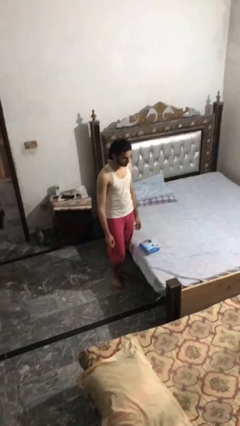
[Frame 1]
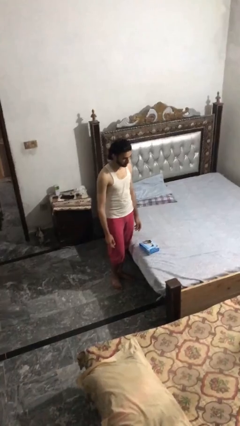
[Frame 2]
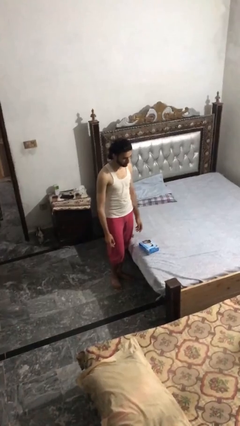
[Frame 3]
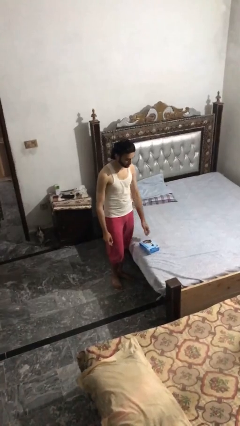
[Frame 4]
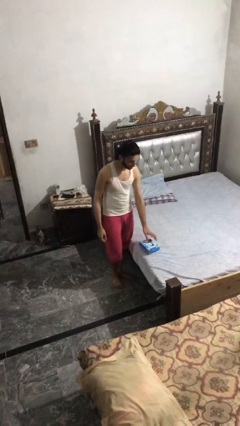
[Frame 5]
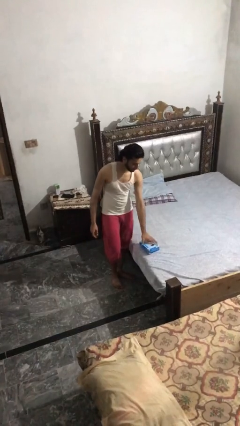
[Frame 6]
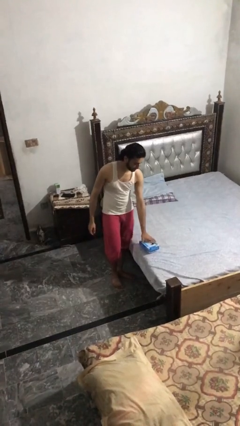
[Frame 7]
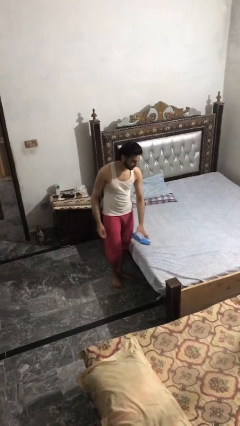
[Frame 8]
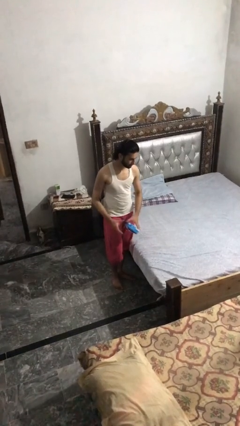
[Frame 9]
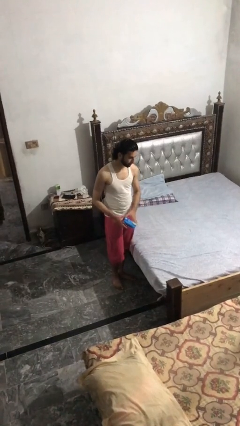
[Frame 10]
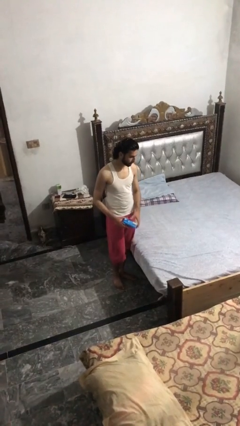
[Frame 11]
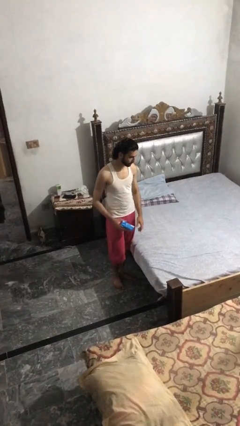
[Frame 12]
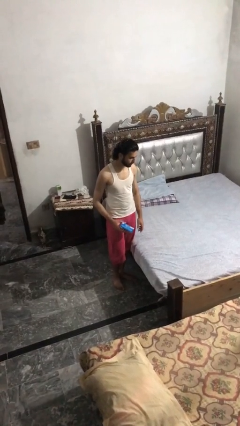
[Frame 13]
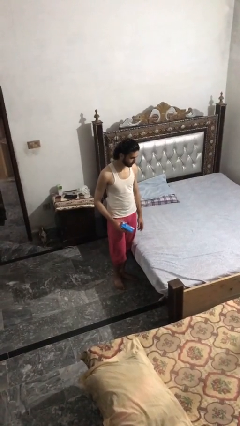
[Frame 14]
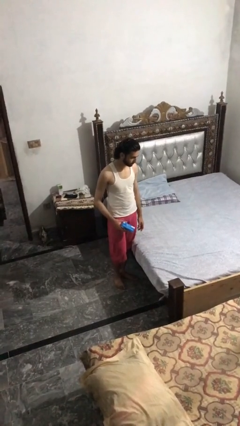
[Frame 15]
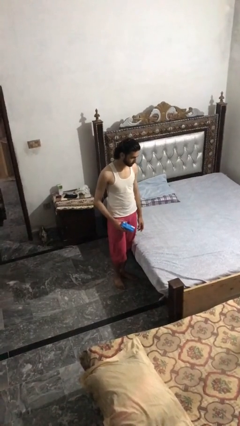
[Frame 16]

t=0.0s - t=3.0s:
person picks up object from bed

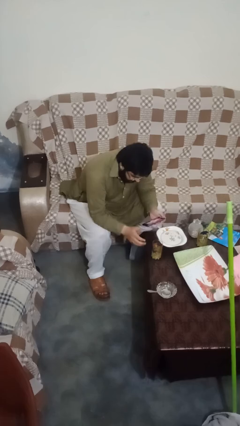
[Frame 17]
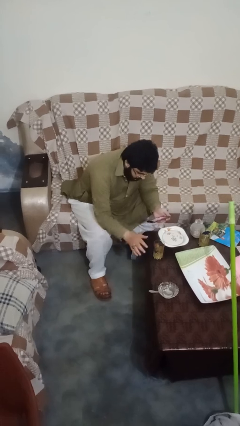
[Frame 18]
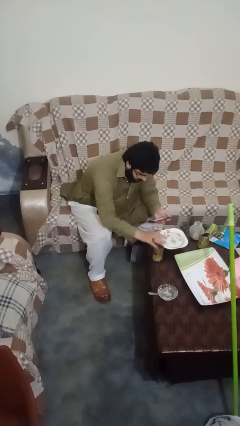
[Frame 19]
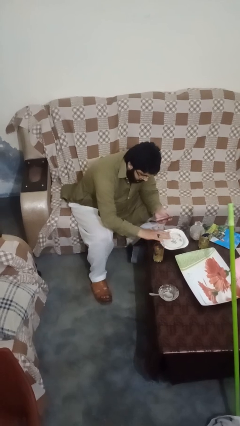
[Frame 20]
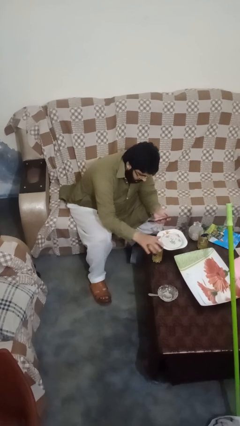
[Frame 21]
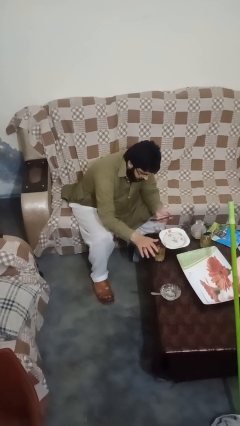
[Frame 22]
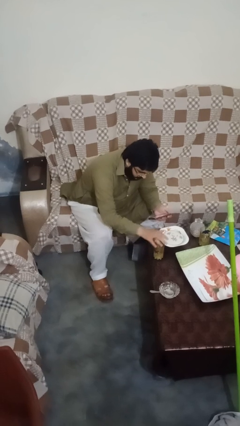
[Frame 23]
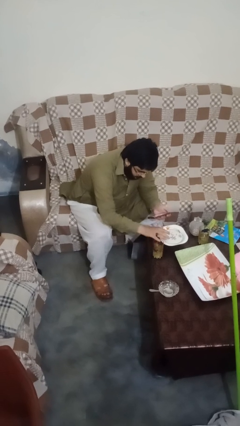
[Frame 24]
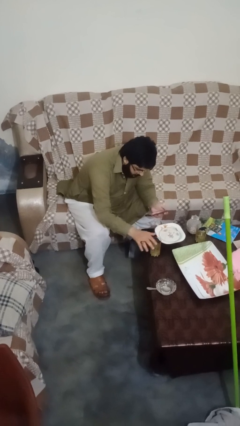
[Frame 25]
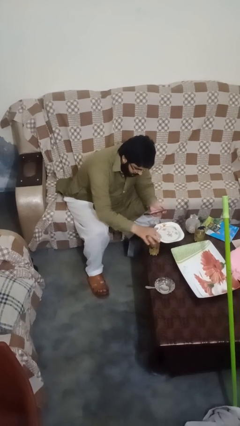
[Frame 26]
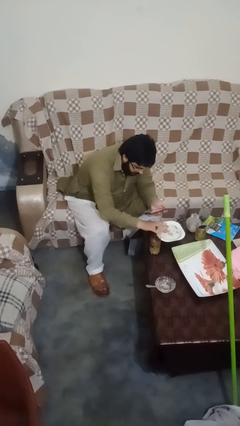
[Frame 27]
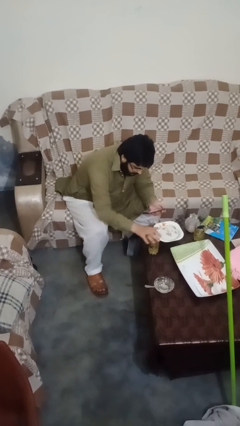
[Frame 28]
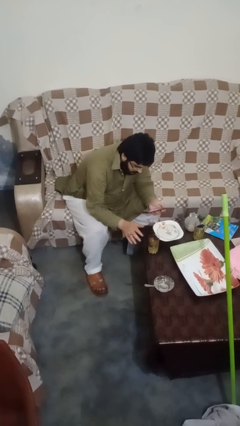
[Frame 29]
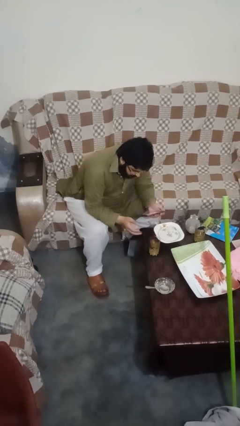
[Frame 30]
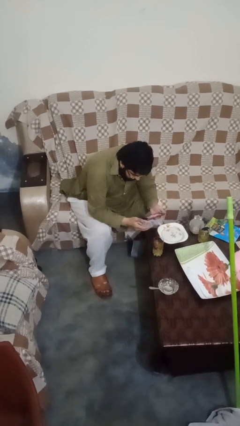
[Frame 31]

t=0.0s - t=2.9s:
person waves hand over object

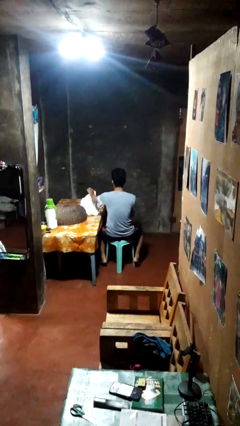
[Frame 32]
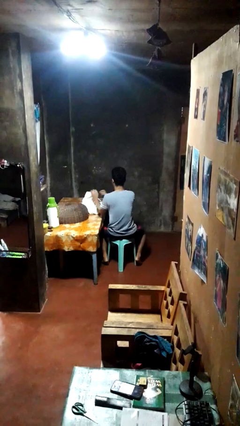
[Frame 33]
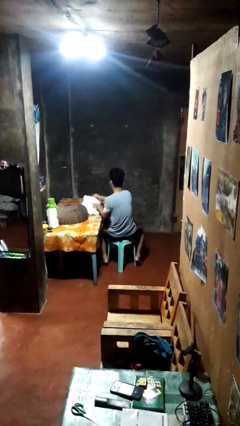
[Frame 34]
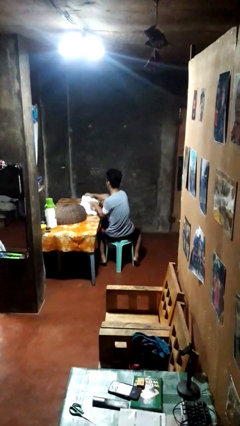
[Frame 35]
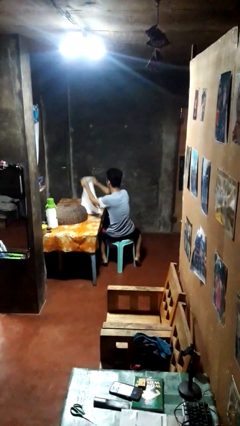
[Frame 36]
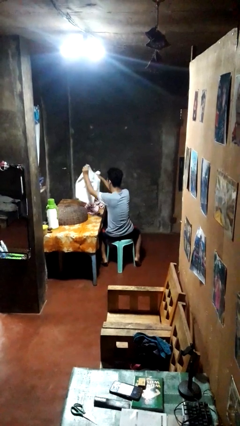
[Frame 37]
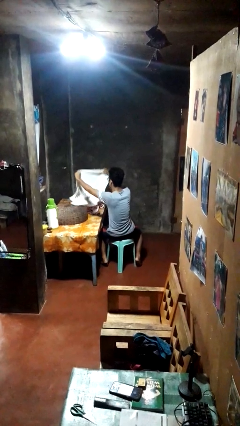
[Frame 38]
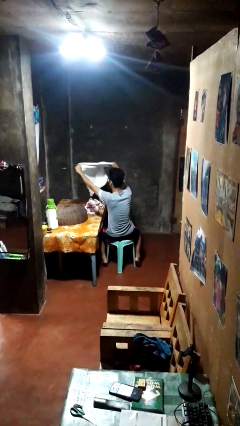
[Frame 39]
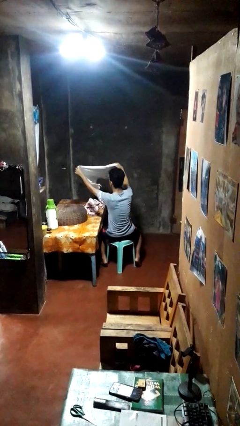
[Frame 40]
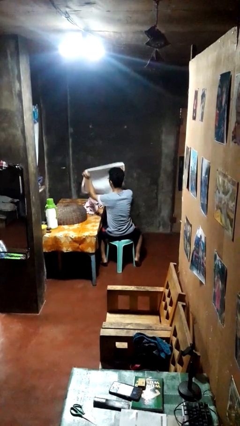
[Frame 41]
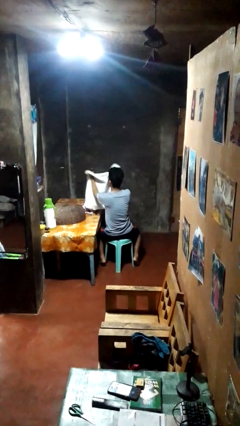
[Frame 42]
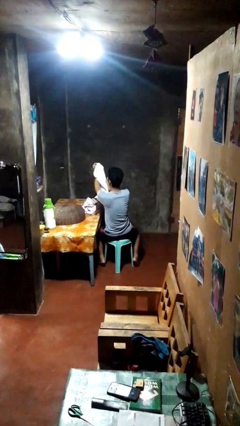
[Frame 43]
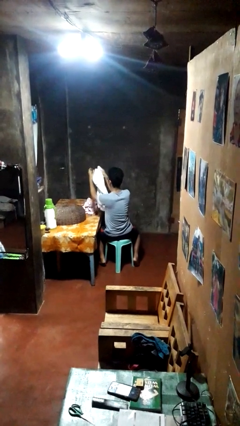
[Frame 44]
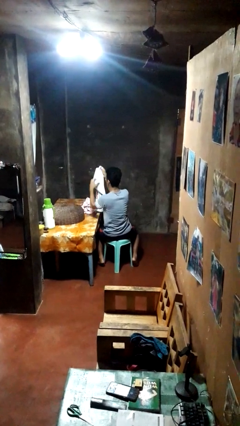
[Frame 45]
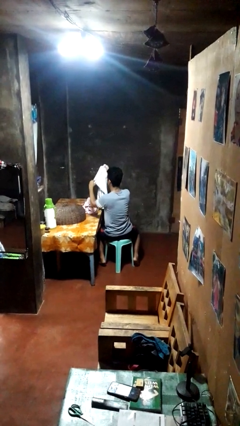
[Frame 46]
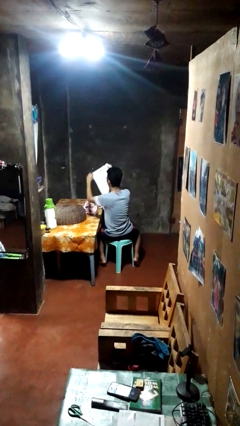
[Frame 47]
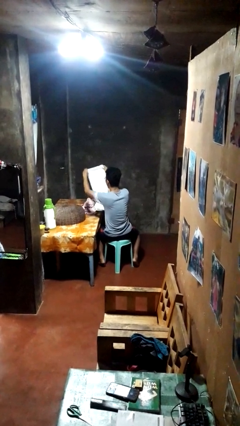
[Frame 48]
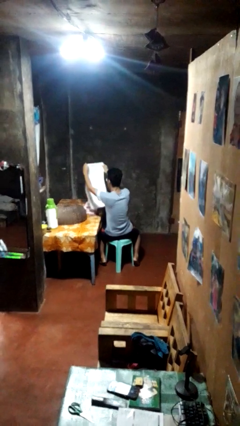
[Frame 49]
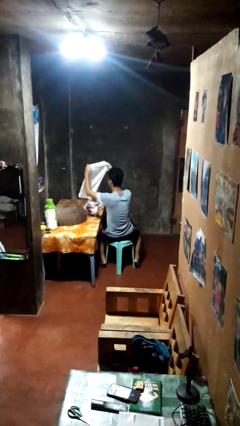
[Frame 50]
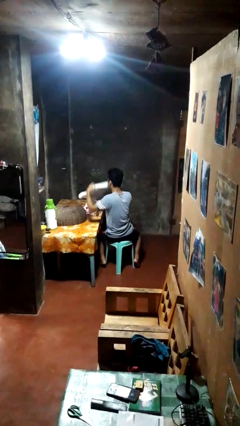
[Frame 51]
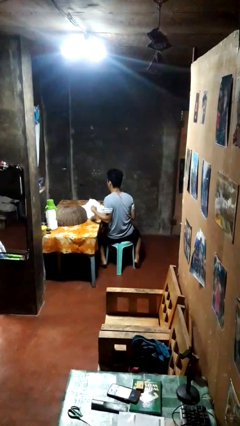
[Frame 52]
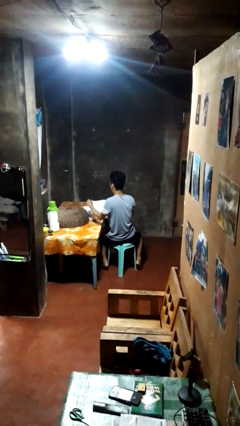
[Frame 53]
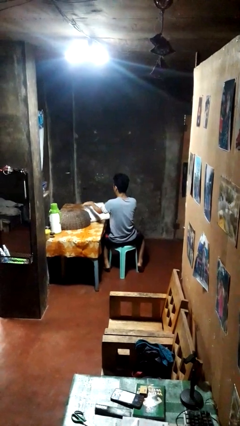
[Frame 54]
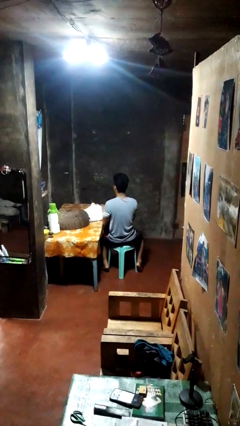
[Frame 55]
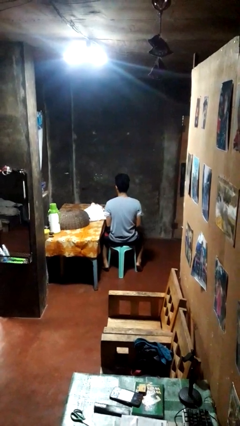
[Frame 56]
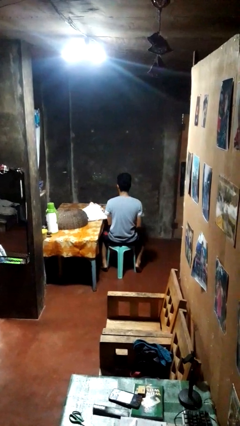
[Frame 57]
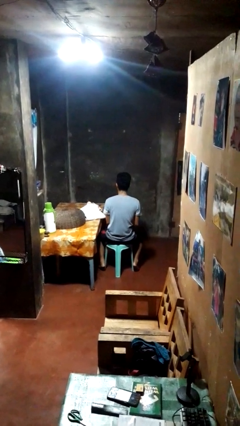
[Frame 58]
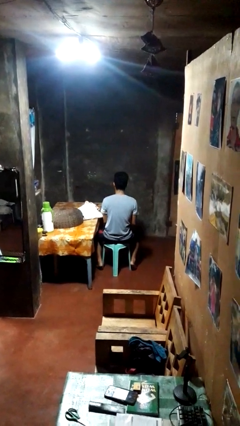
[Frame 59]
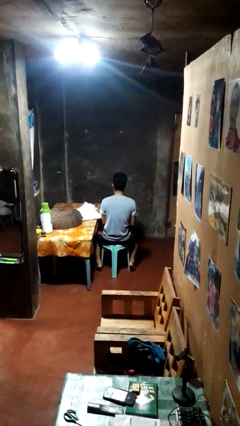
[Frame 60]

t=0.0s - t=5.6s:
person folds towel

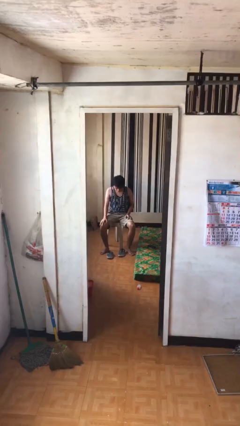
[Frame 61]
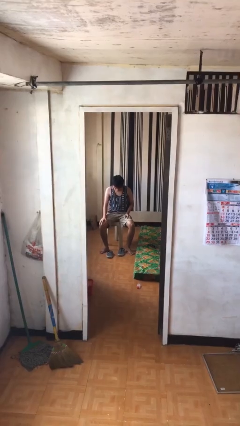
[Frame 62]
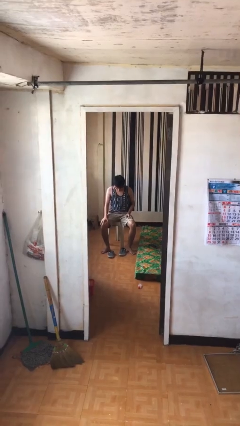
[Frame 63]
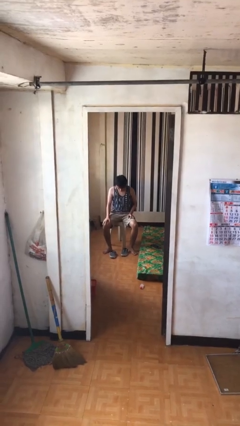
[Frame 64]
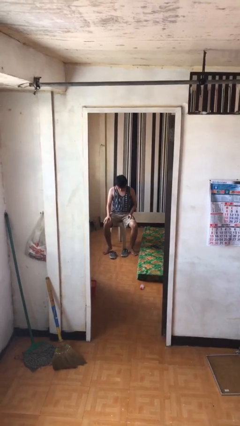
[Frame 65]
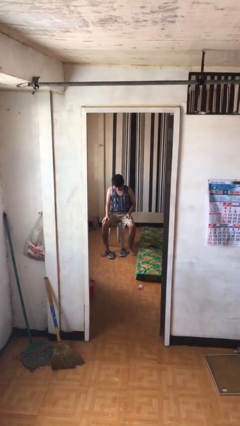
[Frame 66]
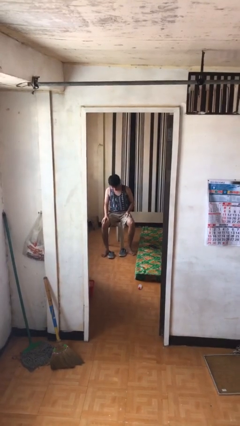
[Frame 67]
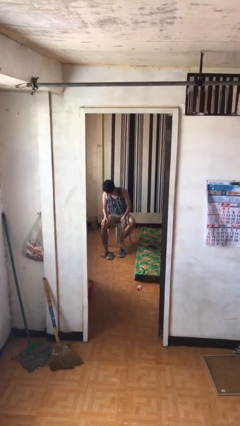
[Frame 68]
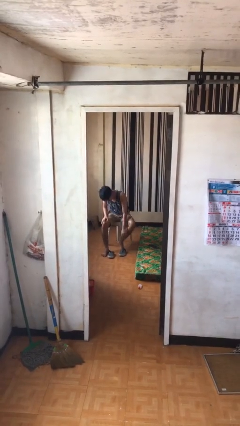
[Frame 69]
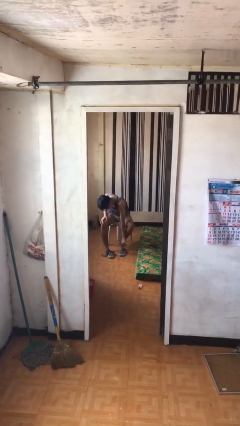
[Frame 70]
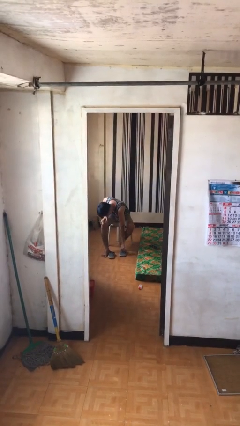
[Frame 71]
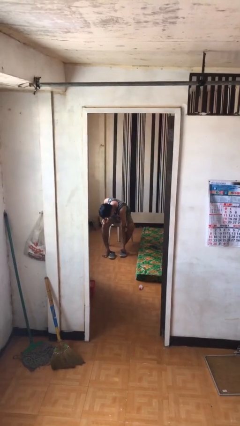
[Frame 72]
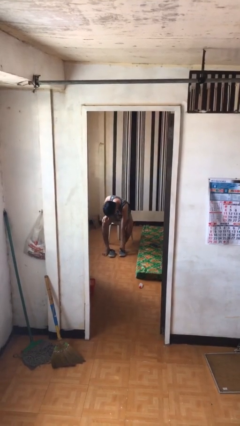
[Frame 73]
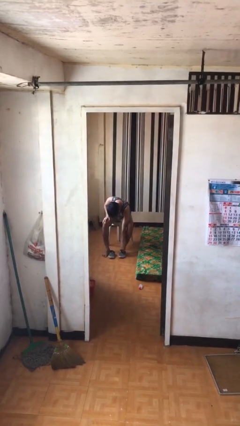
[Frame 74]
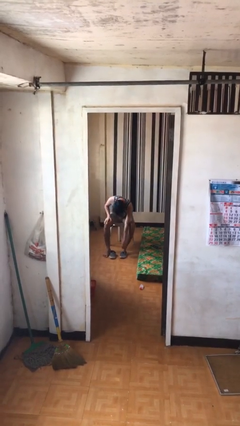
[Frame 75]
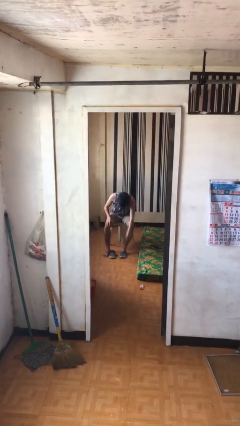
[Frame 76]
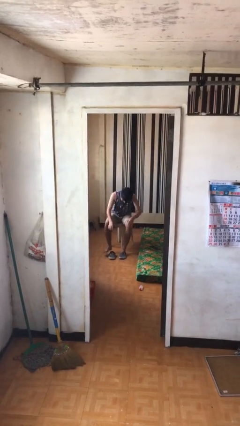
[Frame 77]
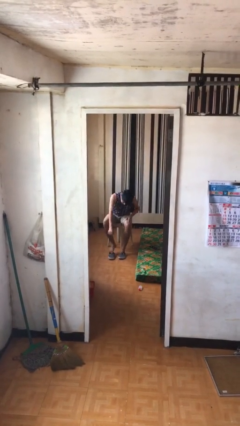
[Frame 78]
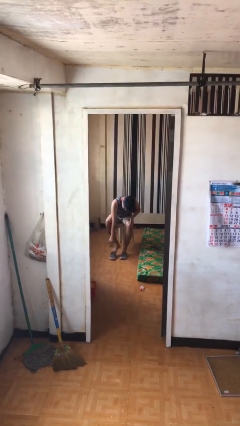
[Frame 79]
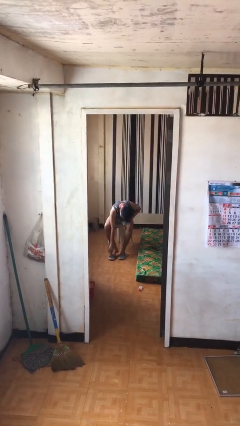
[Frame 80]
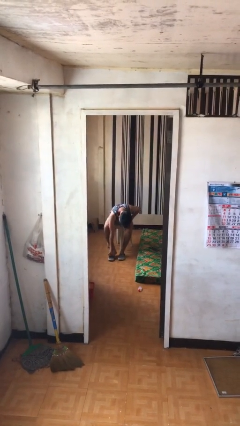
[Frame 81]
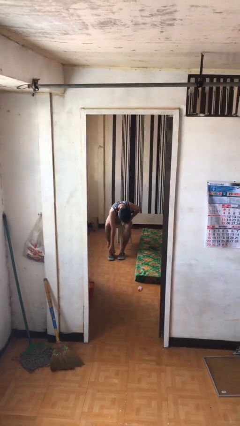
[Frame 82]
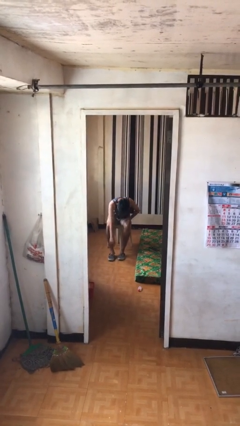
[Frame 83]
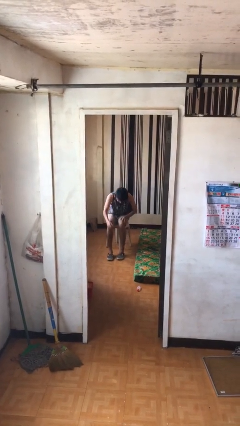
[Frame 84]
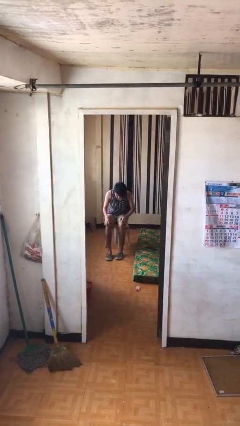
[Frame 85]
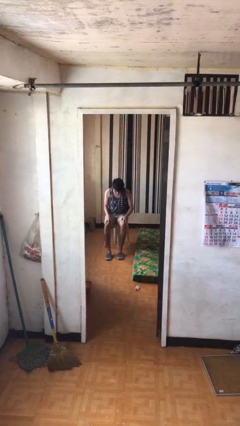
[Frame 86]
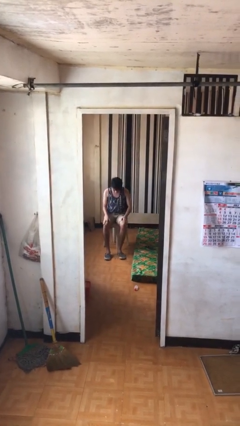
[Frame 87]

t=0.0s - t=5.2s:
person puts on shoes

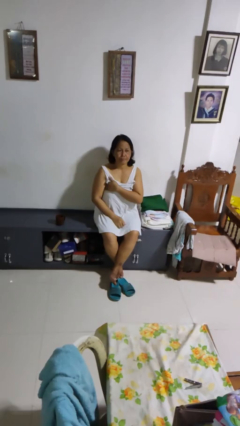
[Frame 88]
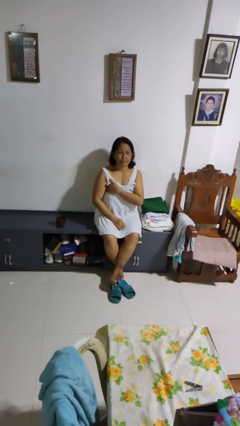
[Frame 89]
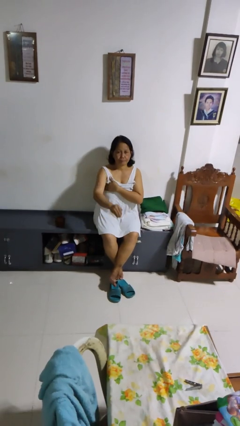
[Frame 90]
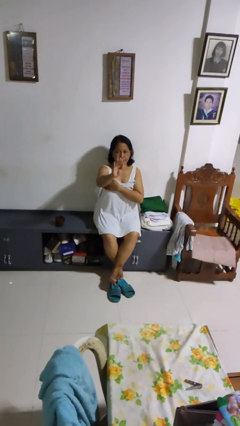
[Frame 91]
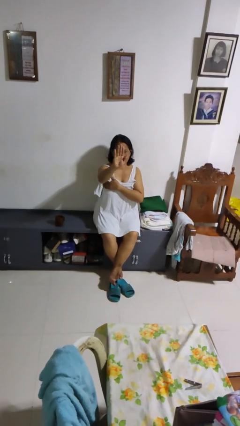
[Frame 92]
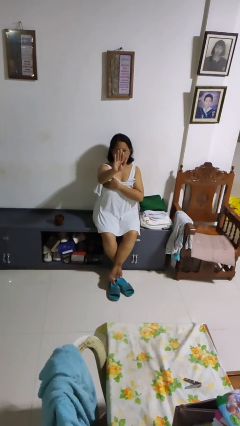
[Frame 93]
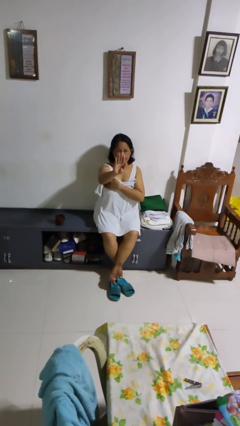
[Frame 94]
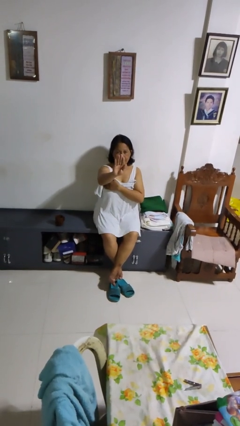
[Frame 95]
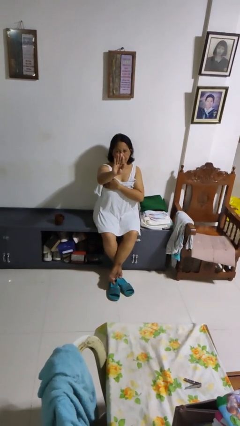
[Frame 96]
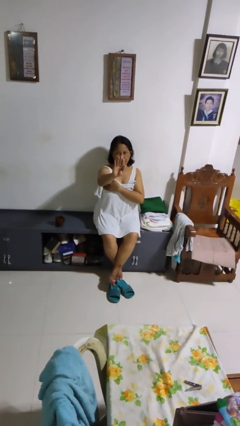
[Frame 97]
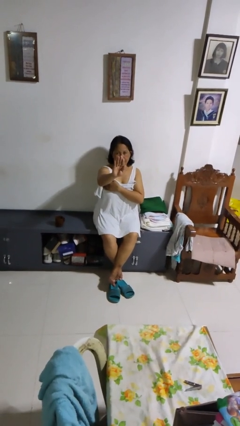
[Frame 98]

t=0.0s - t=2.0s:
person gestures stop
